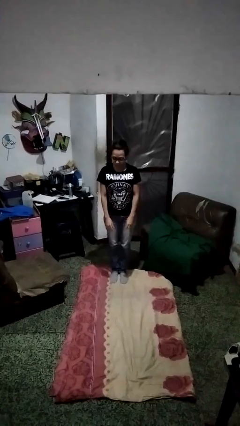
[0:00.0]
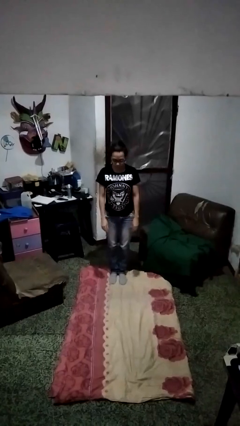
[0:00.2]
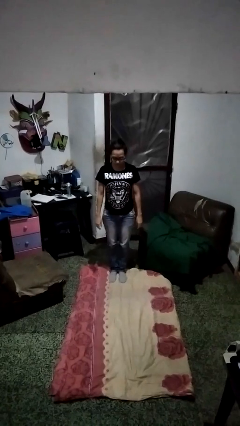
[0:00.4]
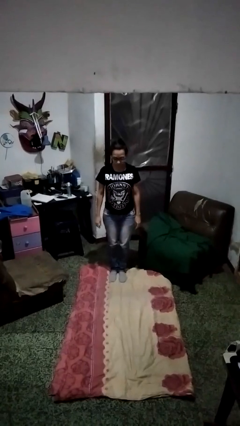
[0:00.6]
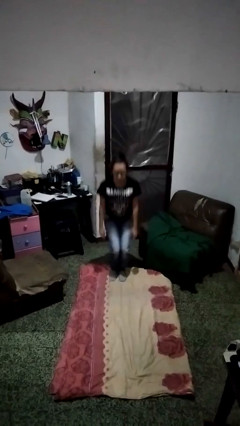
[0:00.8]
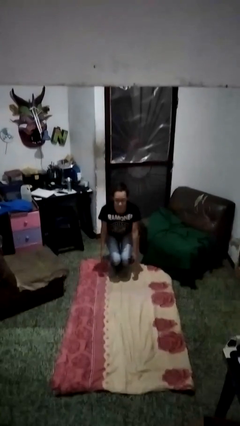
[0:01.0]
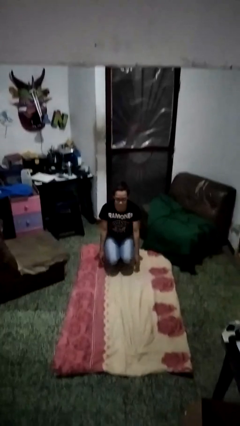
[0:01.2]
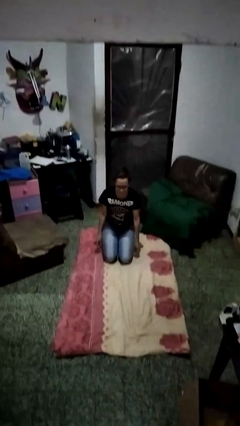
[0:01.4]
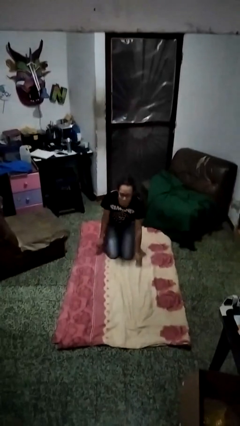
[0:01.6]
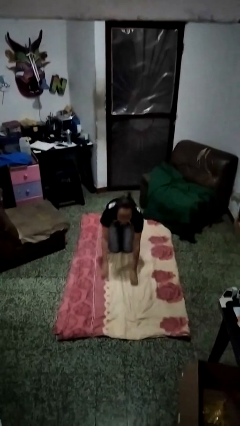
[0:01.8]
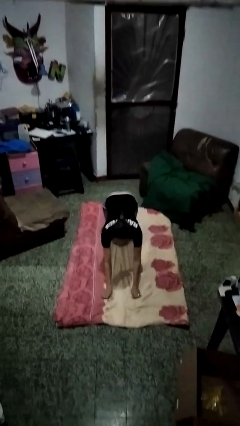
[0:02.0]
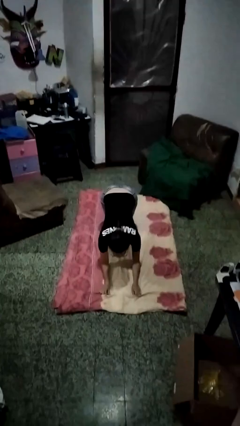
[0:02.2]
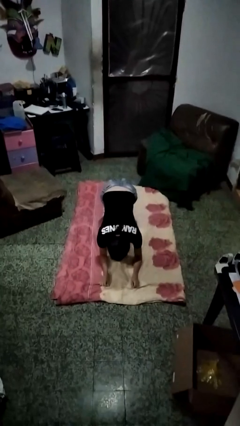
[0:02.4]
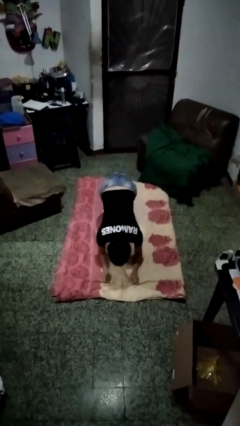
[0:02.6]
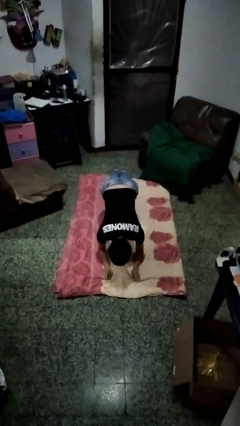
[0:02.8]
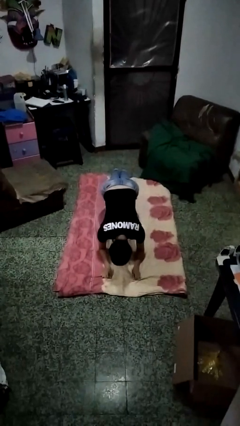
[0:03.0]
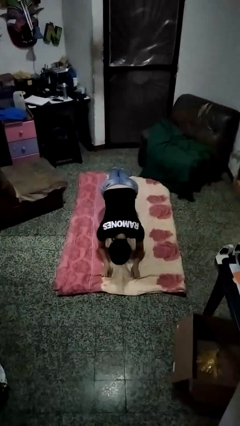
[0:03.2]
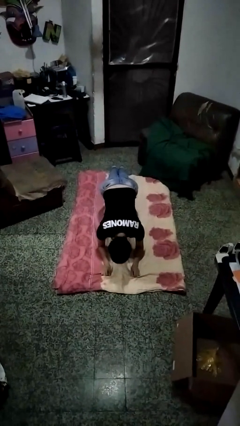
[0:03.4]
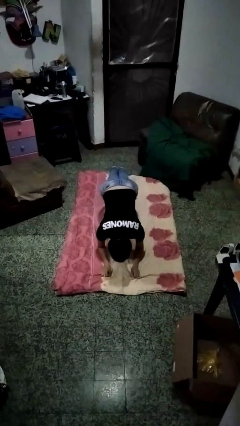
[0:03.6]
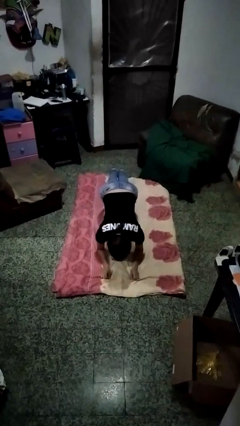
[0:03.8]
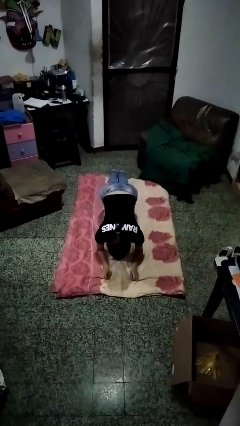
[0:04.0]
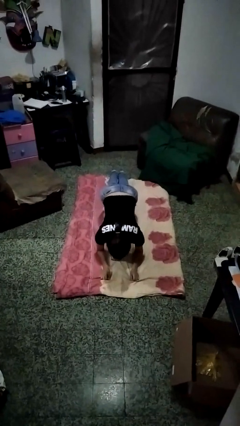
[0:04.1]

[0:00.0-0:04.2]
person exercises with plank

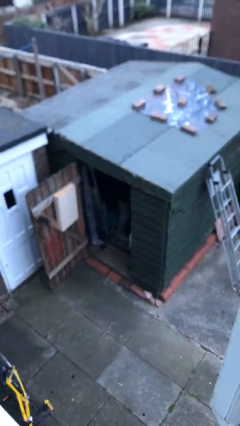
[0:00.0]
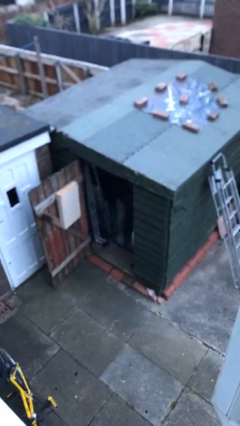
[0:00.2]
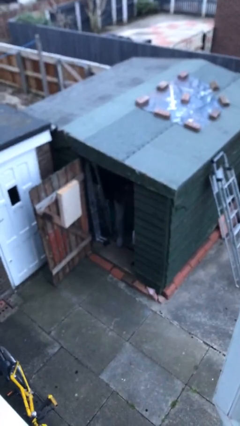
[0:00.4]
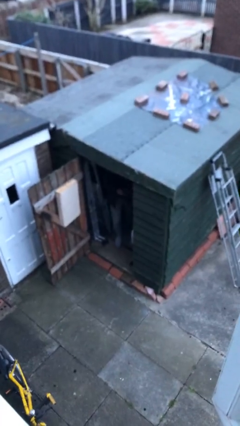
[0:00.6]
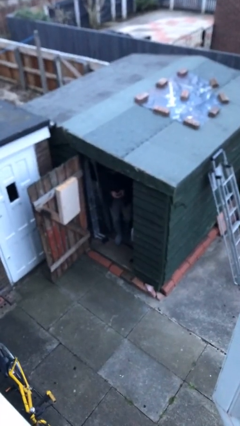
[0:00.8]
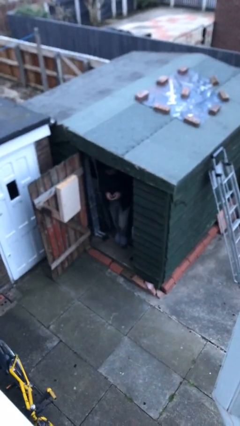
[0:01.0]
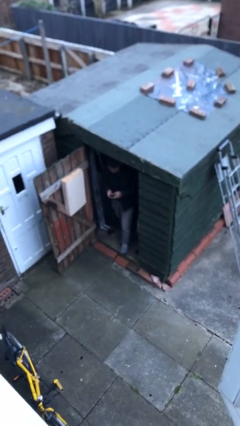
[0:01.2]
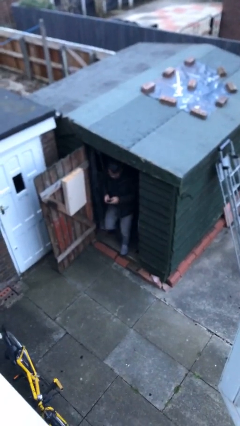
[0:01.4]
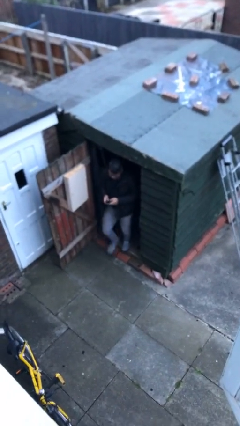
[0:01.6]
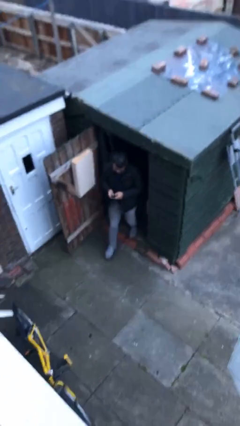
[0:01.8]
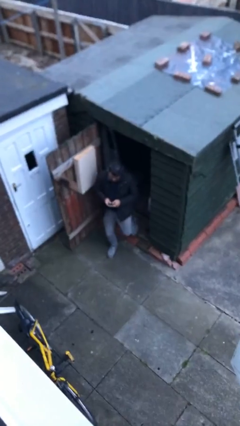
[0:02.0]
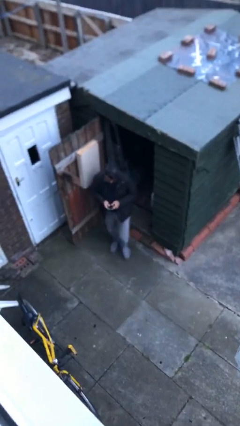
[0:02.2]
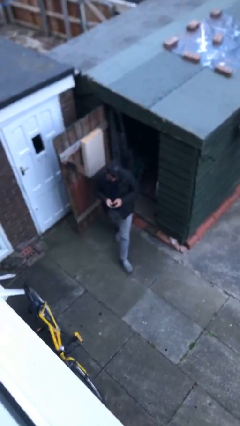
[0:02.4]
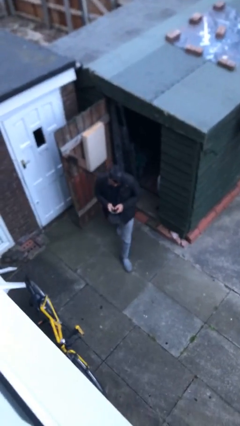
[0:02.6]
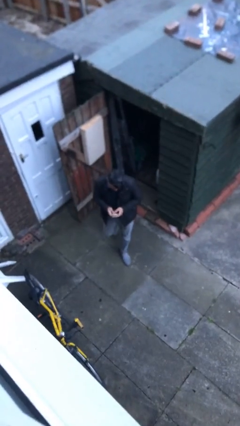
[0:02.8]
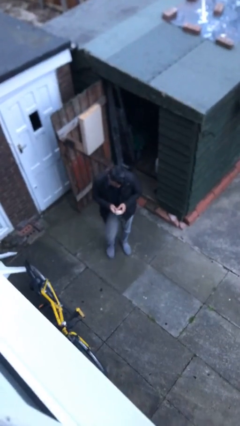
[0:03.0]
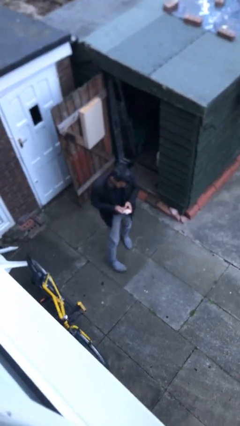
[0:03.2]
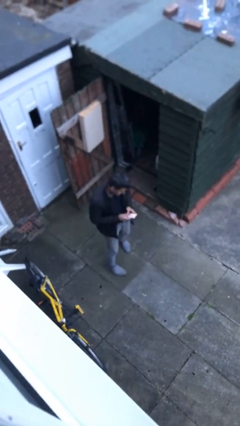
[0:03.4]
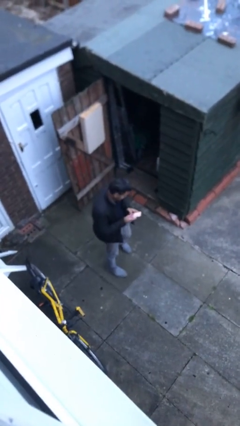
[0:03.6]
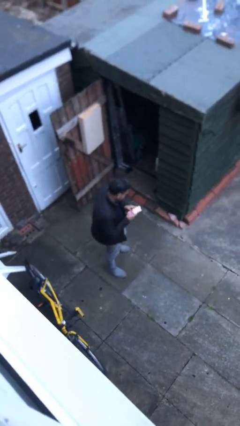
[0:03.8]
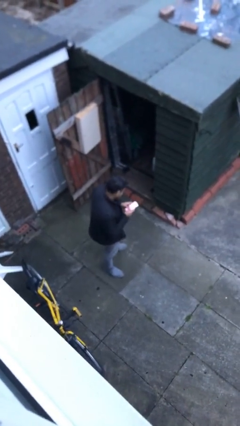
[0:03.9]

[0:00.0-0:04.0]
person enters scene through structure

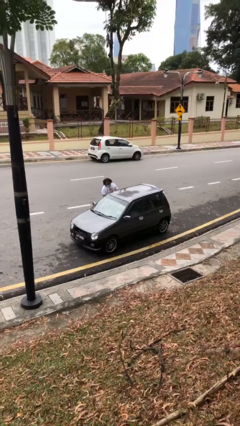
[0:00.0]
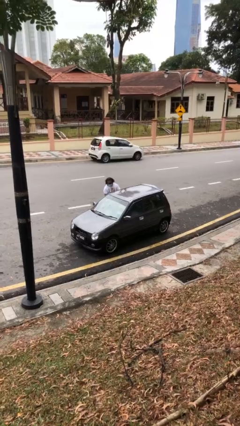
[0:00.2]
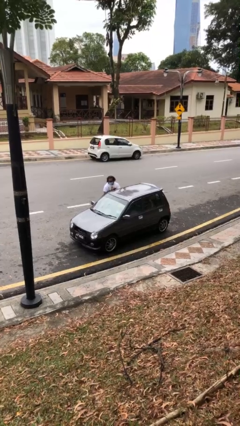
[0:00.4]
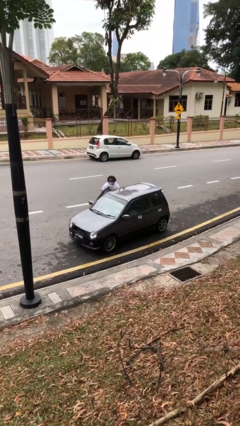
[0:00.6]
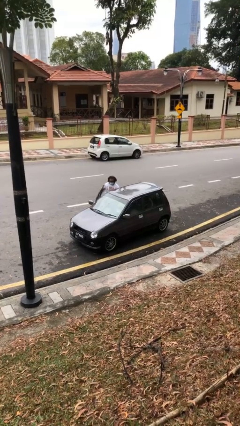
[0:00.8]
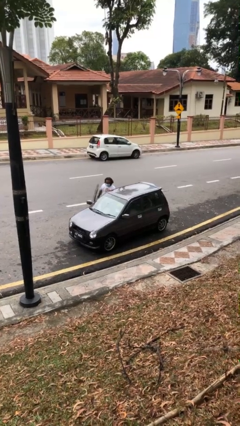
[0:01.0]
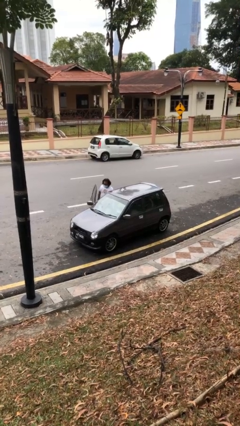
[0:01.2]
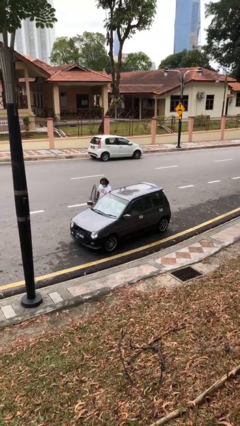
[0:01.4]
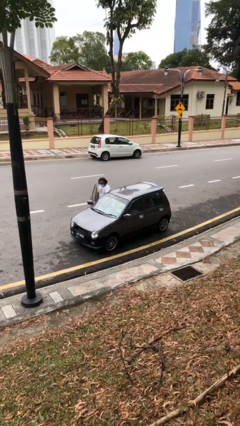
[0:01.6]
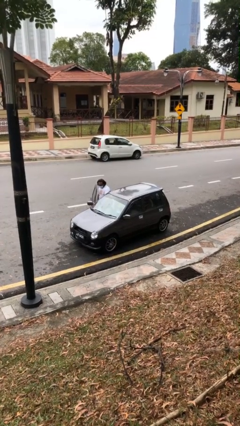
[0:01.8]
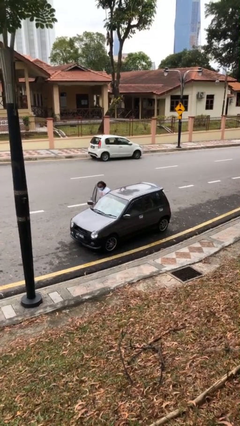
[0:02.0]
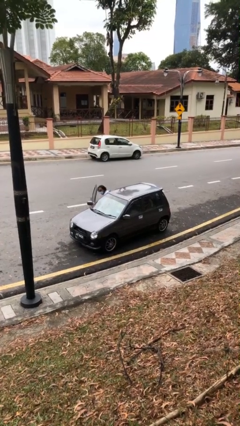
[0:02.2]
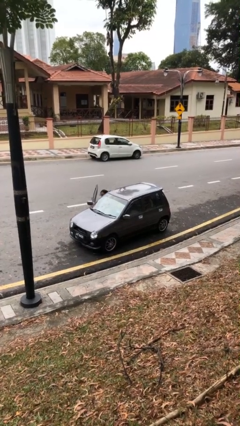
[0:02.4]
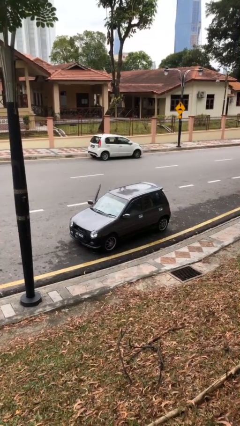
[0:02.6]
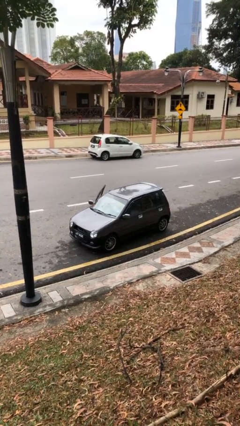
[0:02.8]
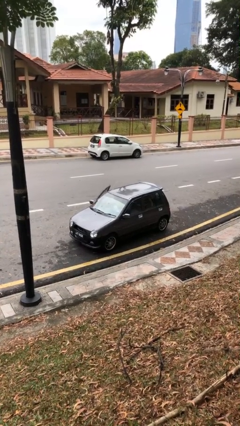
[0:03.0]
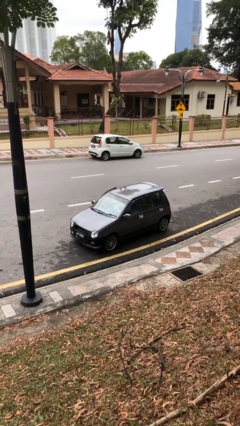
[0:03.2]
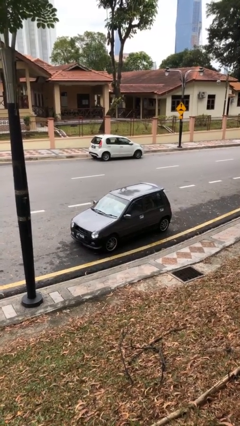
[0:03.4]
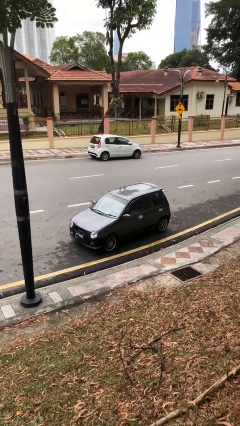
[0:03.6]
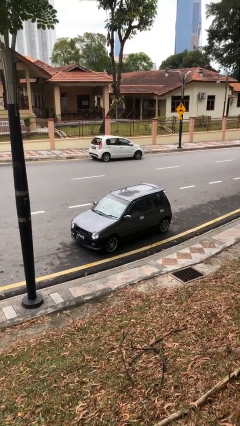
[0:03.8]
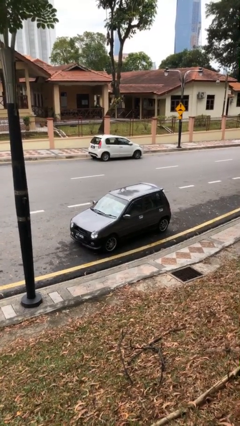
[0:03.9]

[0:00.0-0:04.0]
car picks up person

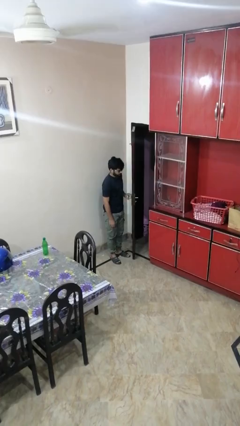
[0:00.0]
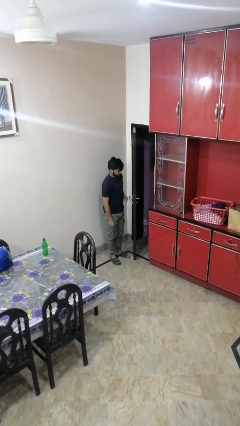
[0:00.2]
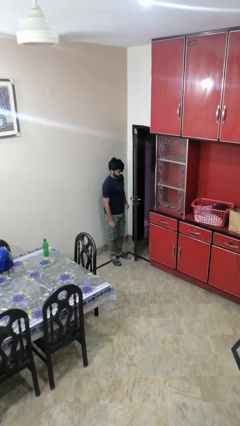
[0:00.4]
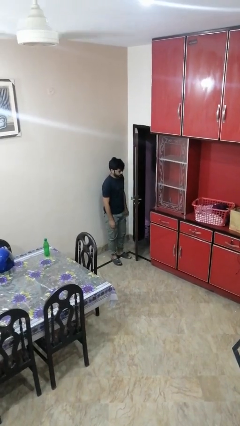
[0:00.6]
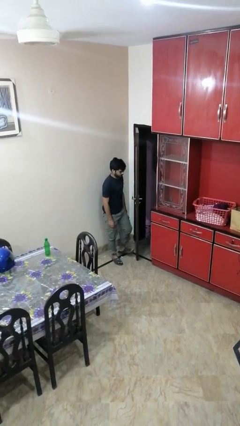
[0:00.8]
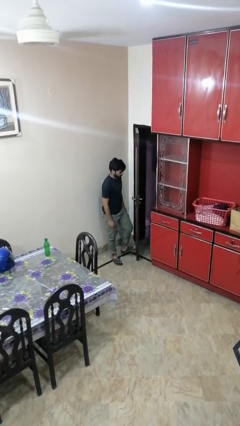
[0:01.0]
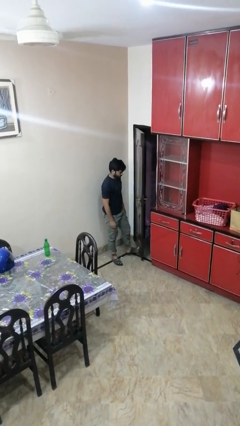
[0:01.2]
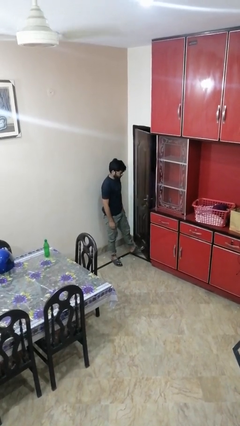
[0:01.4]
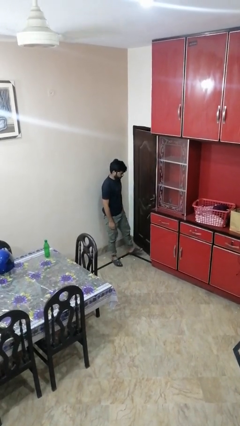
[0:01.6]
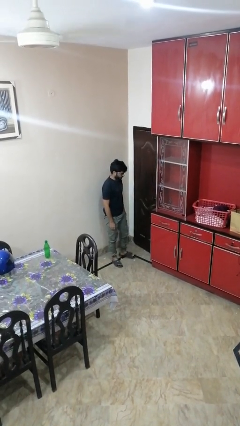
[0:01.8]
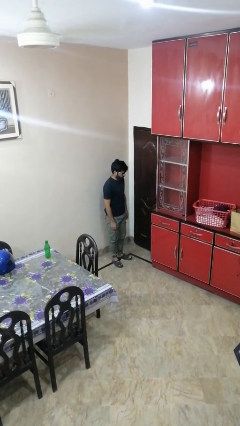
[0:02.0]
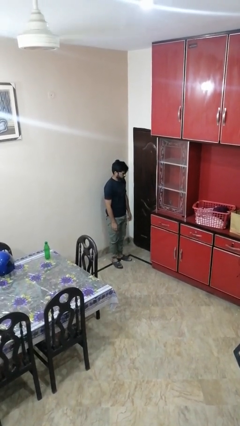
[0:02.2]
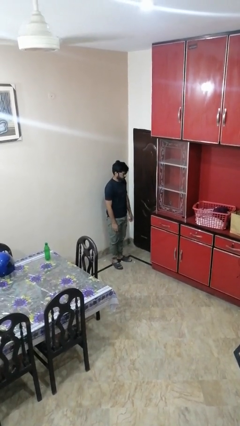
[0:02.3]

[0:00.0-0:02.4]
person closes door with foot

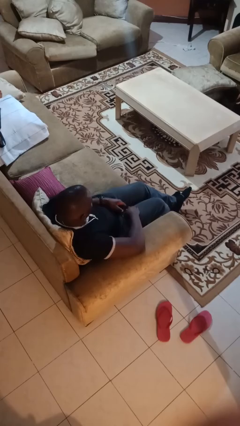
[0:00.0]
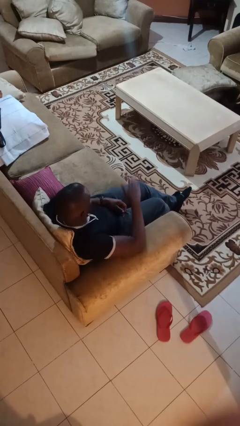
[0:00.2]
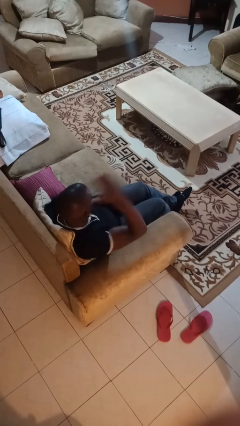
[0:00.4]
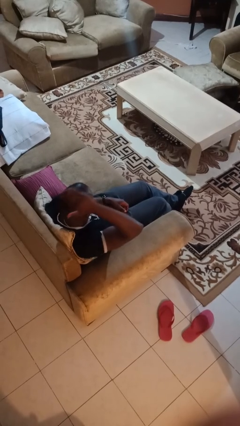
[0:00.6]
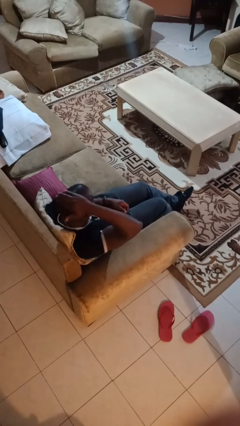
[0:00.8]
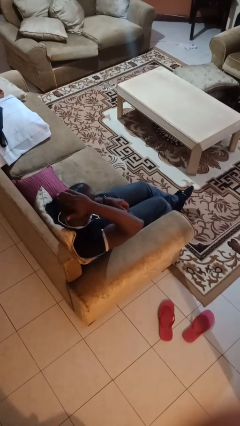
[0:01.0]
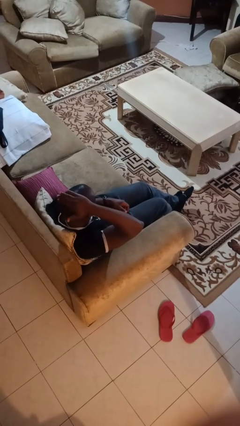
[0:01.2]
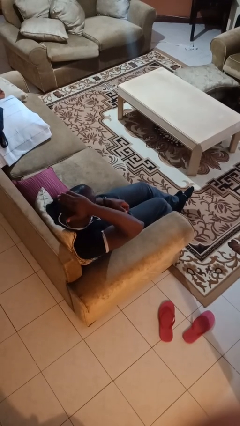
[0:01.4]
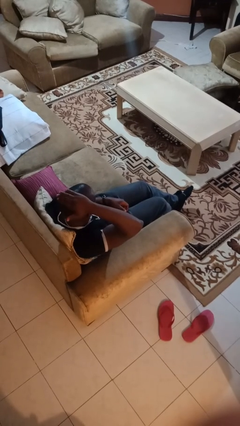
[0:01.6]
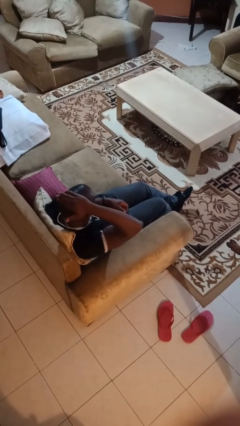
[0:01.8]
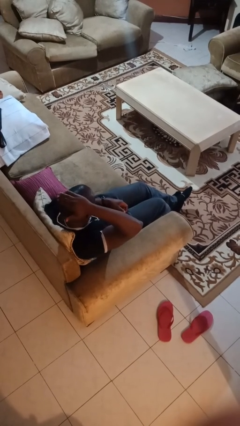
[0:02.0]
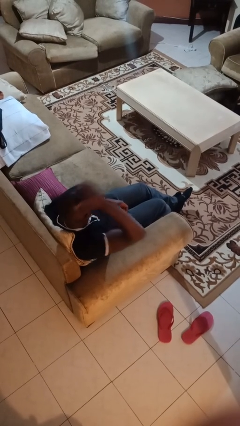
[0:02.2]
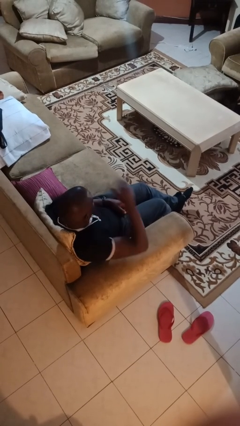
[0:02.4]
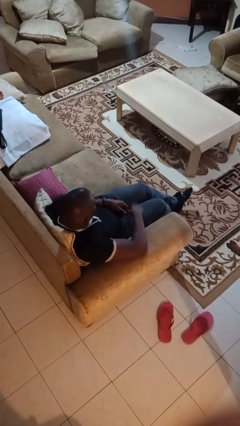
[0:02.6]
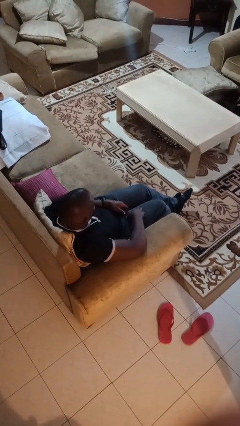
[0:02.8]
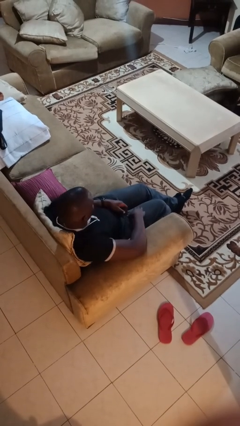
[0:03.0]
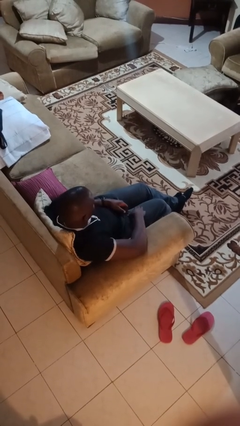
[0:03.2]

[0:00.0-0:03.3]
person pats head
